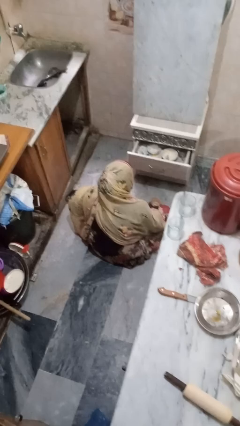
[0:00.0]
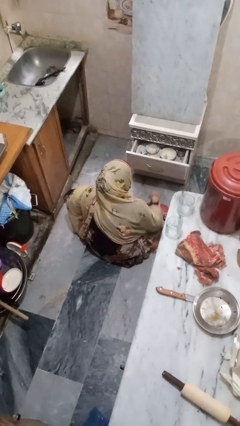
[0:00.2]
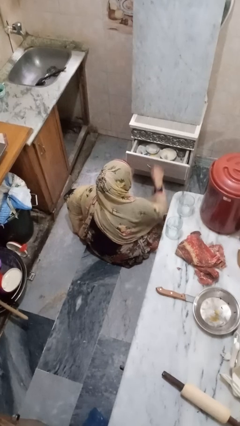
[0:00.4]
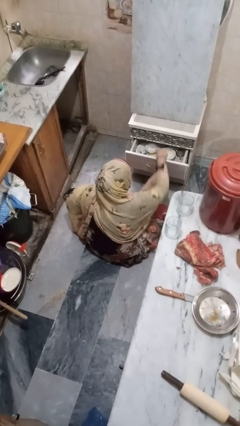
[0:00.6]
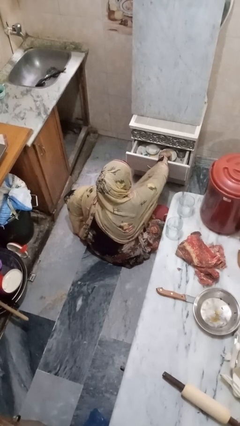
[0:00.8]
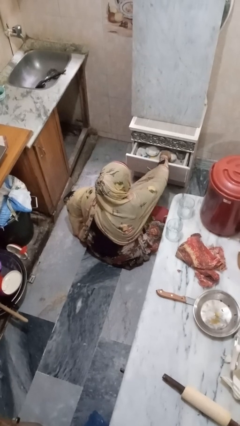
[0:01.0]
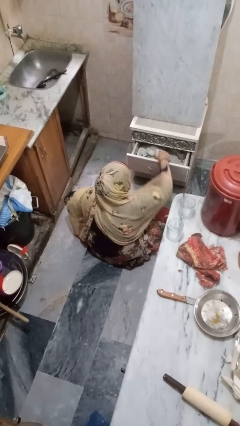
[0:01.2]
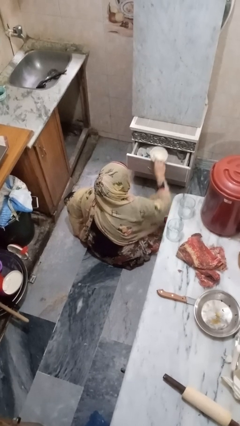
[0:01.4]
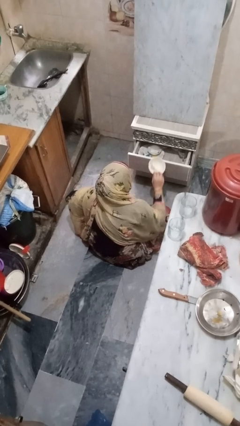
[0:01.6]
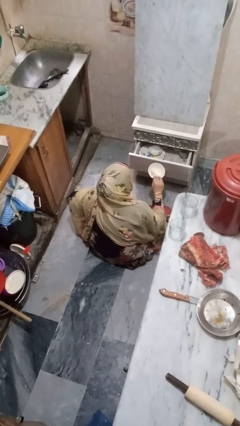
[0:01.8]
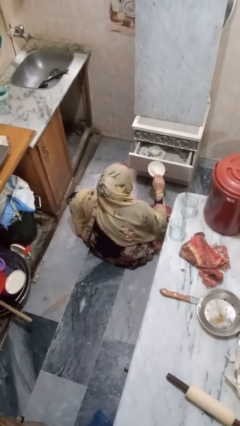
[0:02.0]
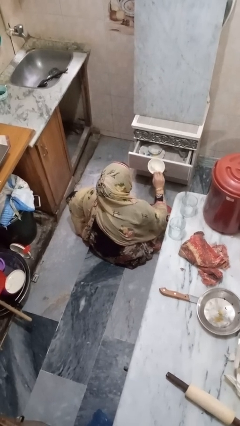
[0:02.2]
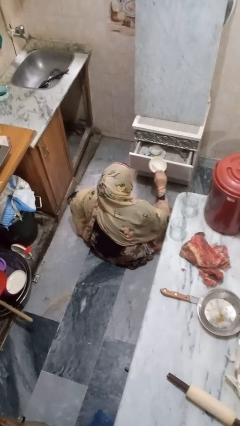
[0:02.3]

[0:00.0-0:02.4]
person takes object from kitchen drawer

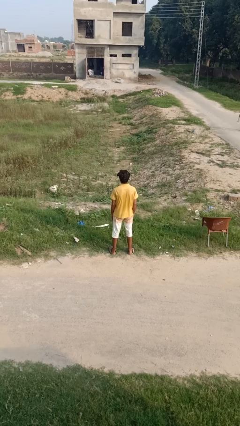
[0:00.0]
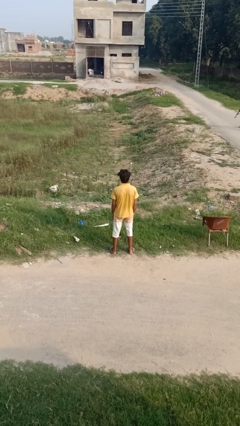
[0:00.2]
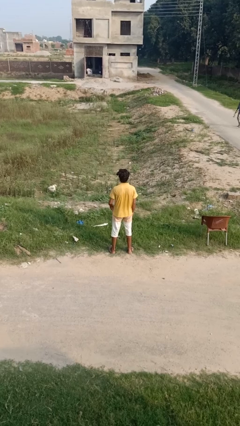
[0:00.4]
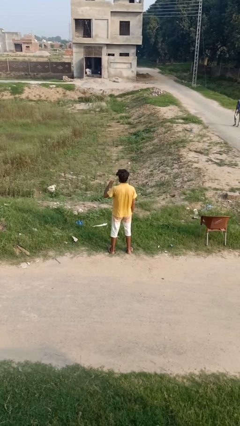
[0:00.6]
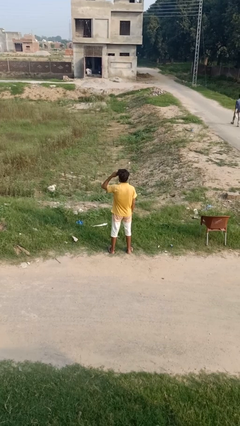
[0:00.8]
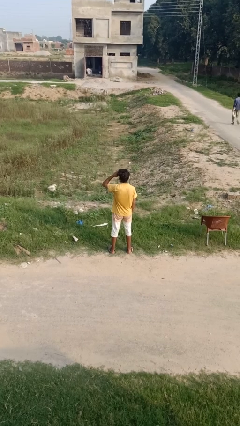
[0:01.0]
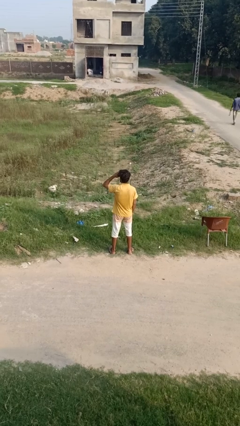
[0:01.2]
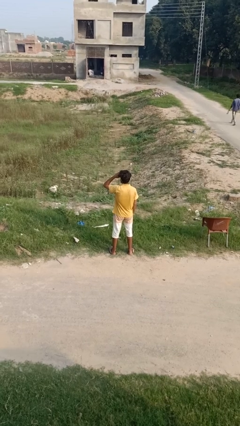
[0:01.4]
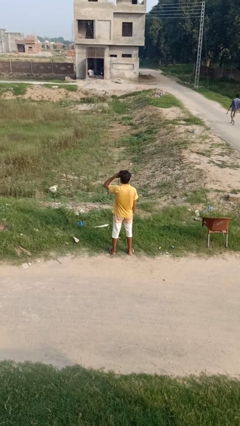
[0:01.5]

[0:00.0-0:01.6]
person shades eyes

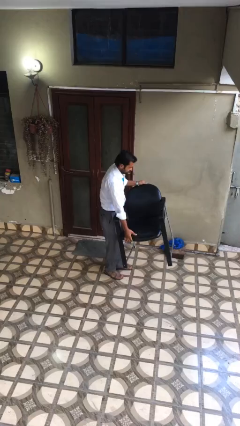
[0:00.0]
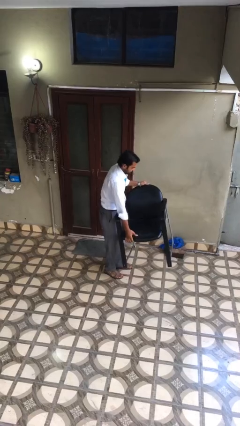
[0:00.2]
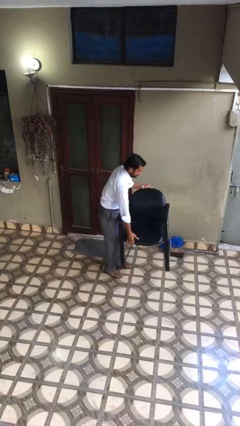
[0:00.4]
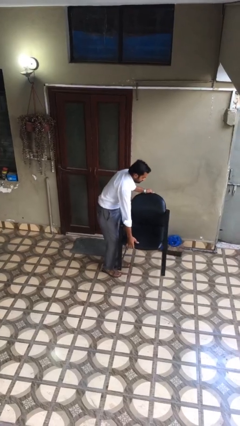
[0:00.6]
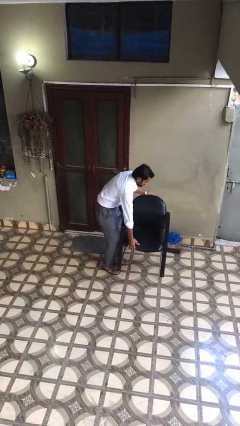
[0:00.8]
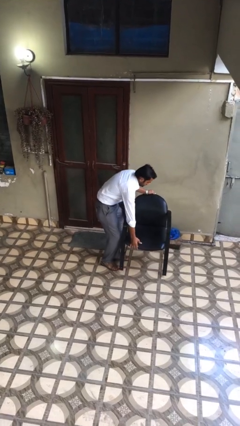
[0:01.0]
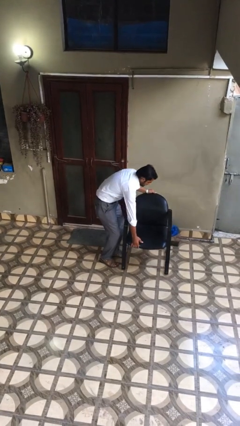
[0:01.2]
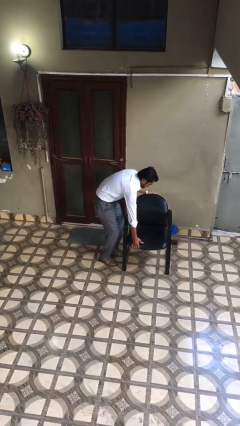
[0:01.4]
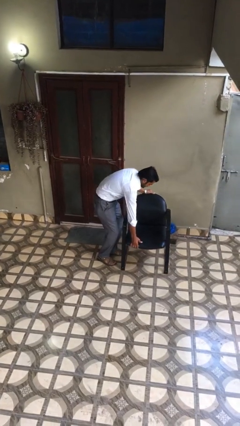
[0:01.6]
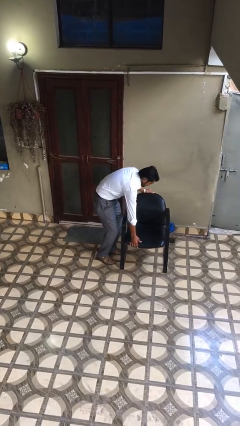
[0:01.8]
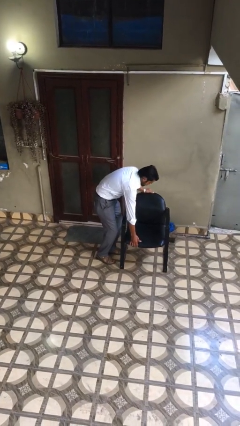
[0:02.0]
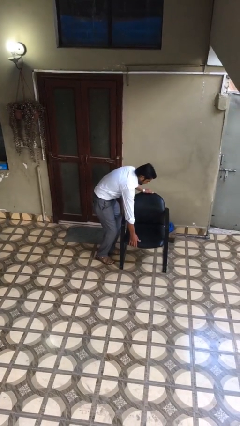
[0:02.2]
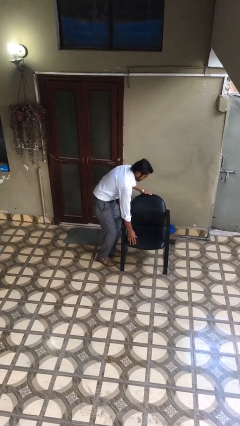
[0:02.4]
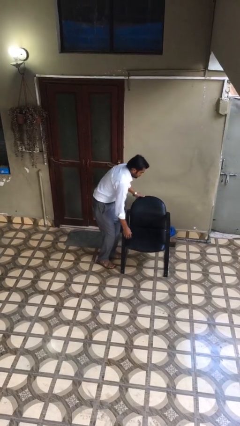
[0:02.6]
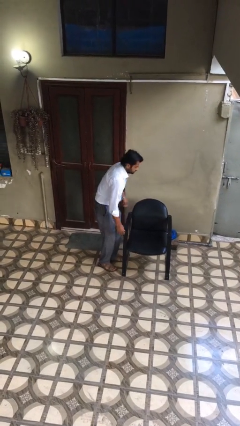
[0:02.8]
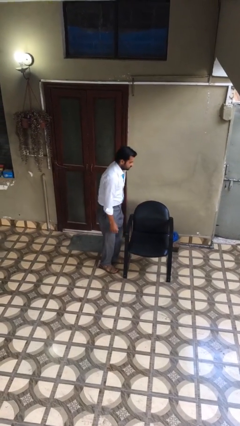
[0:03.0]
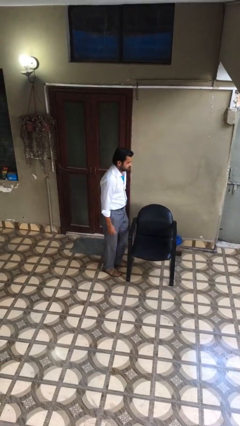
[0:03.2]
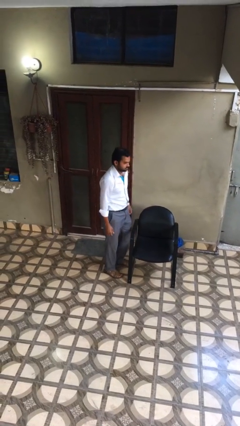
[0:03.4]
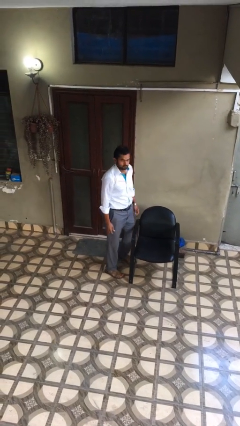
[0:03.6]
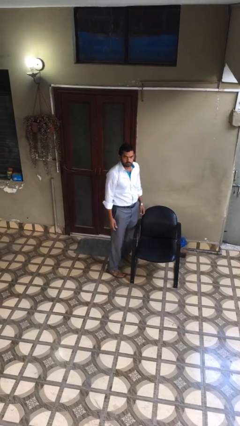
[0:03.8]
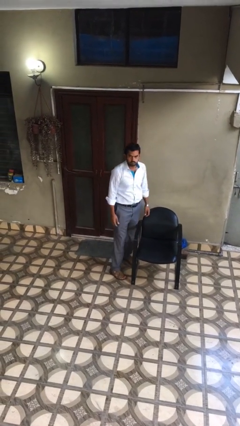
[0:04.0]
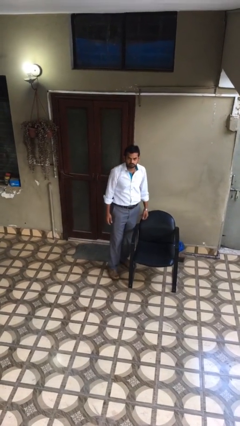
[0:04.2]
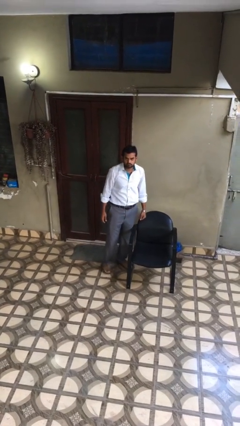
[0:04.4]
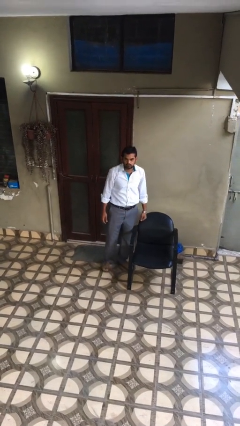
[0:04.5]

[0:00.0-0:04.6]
person puts down object on floor

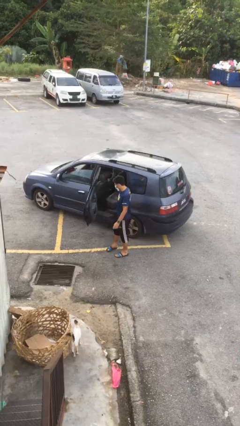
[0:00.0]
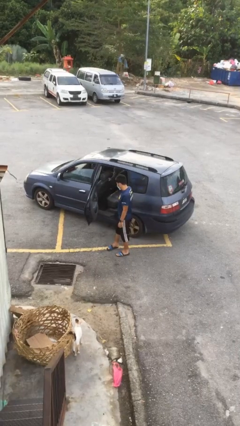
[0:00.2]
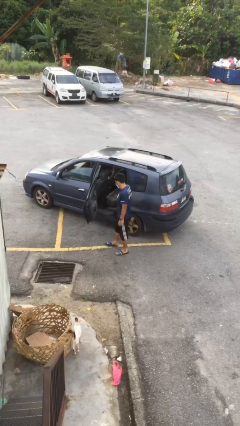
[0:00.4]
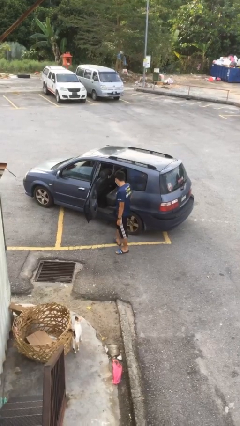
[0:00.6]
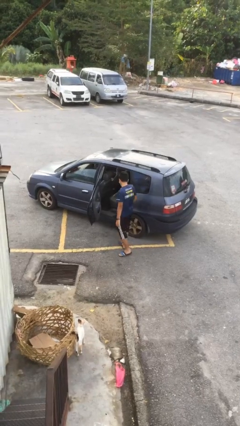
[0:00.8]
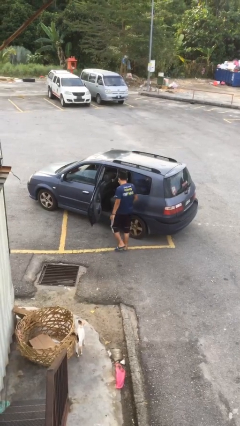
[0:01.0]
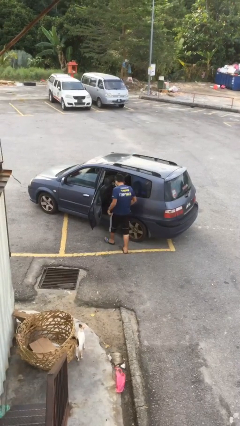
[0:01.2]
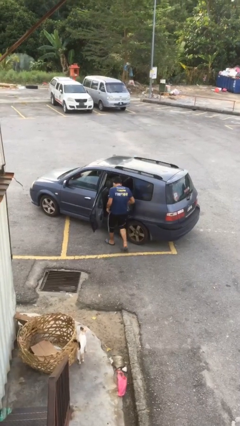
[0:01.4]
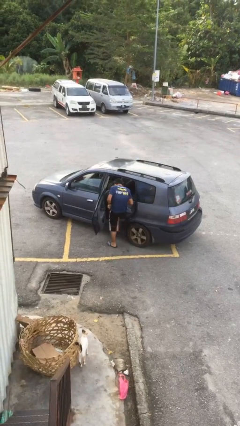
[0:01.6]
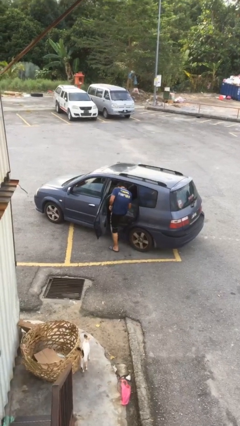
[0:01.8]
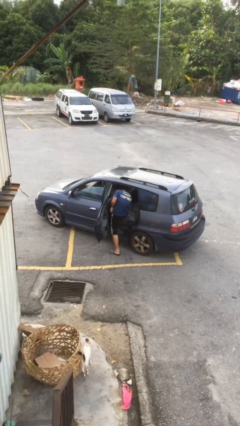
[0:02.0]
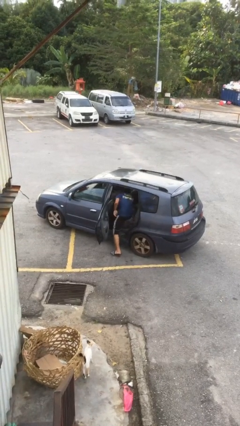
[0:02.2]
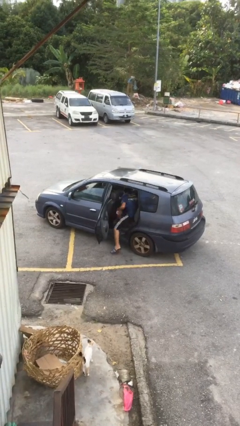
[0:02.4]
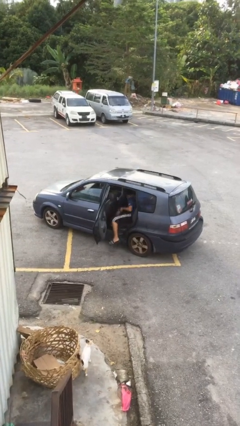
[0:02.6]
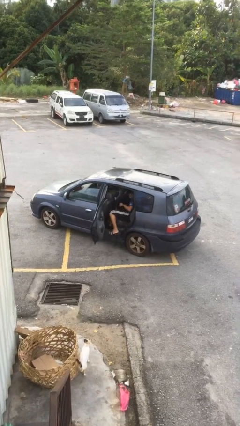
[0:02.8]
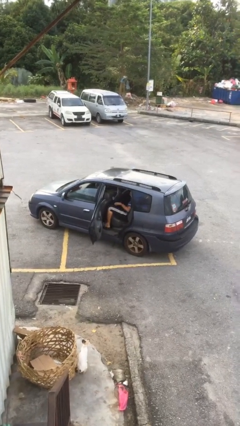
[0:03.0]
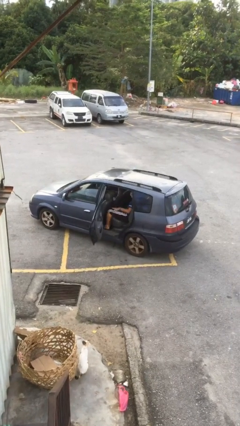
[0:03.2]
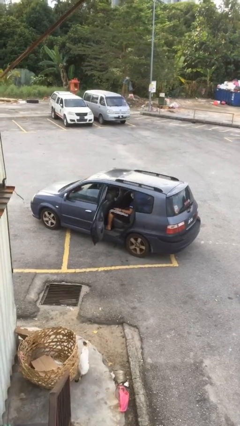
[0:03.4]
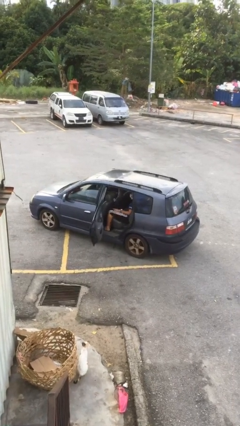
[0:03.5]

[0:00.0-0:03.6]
person enters car

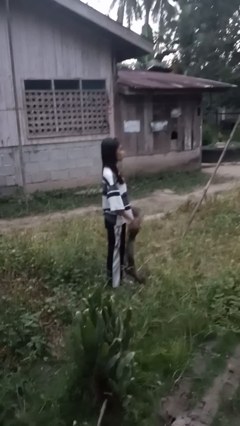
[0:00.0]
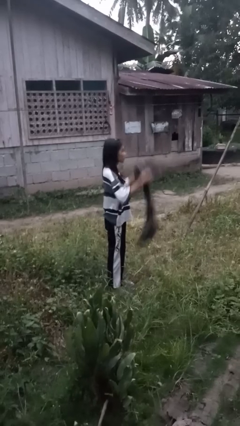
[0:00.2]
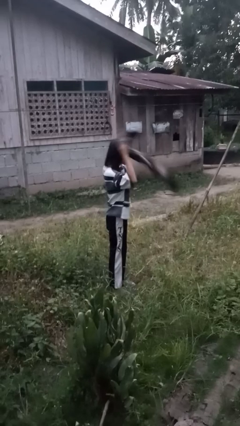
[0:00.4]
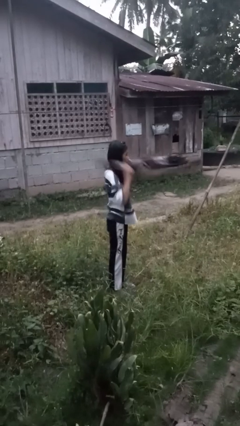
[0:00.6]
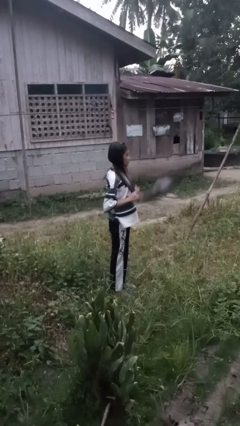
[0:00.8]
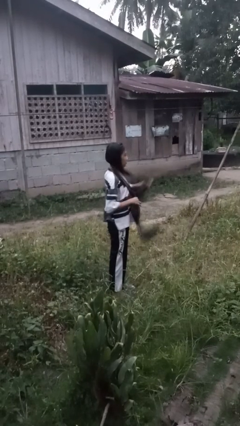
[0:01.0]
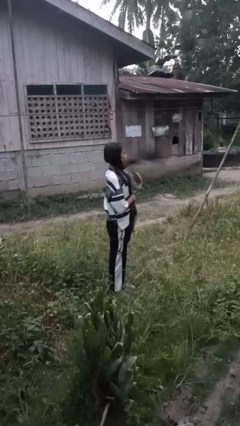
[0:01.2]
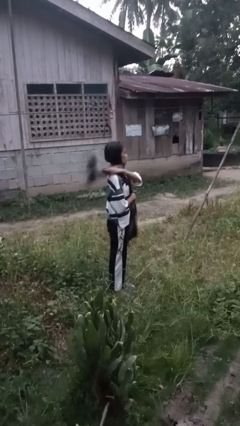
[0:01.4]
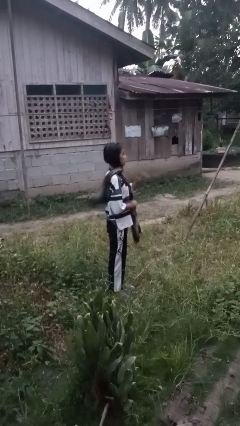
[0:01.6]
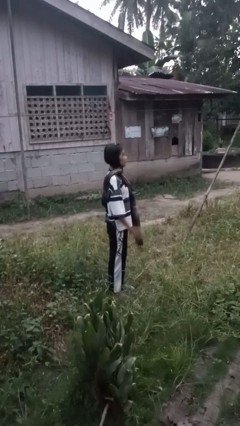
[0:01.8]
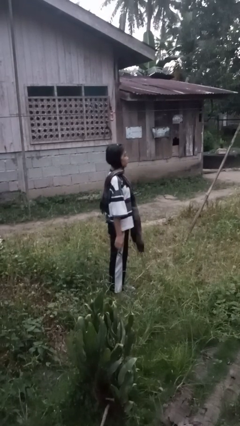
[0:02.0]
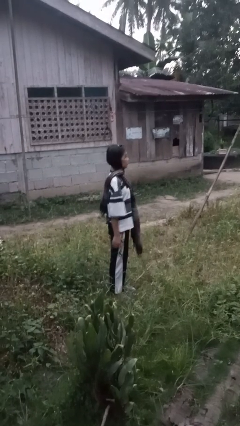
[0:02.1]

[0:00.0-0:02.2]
person puts on scarf

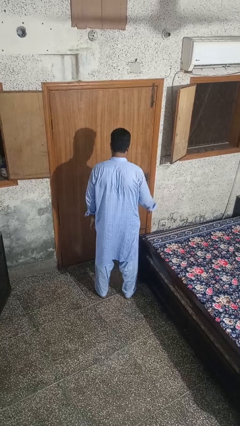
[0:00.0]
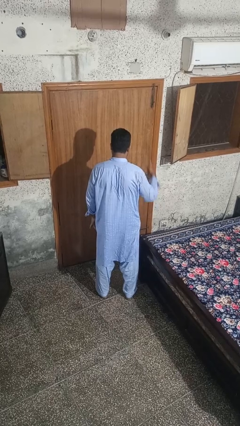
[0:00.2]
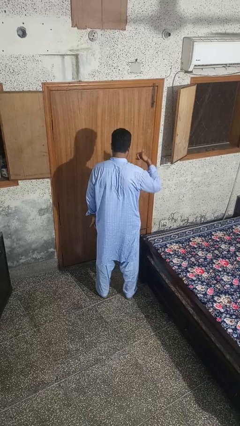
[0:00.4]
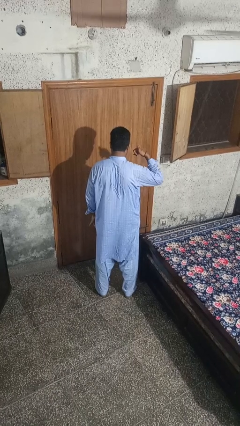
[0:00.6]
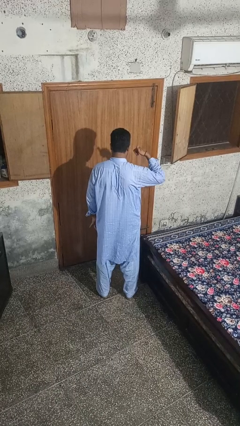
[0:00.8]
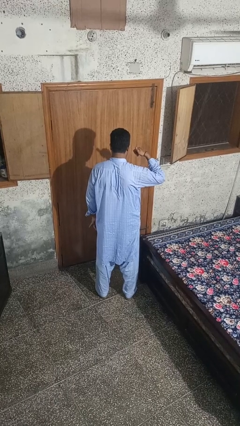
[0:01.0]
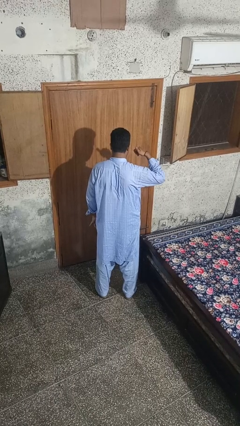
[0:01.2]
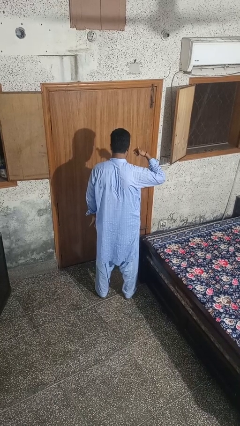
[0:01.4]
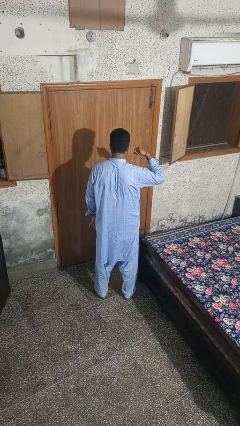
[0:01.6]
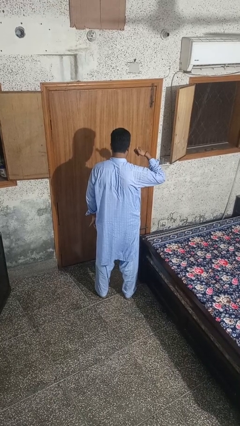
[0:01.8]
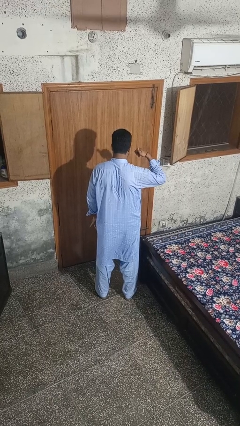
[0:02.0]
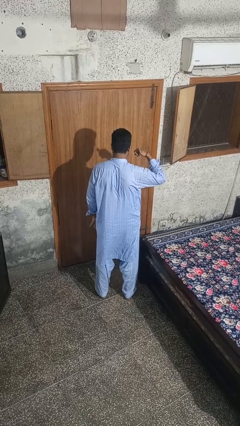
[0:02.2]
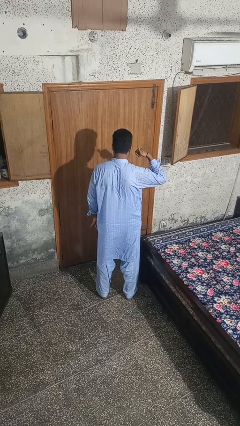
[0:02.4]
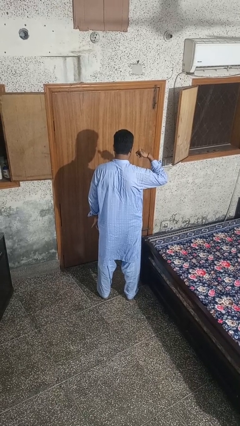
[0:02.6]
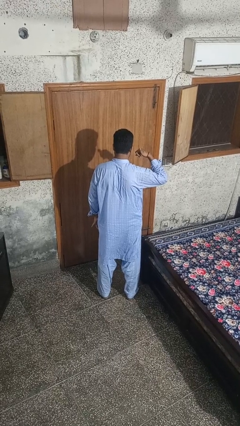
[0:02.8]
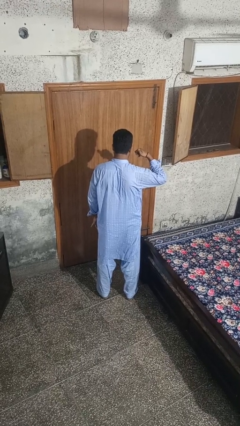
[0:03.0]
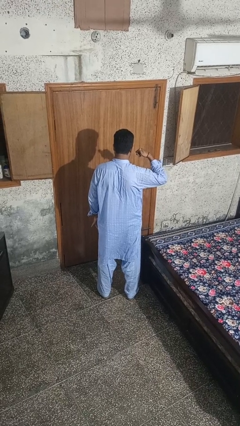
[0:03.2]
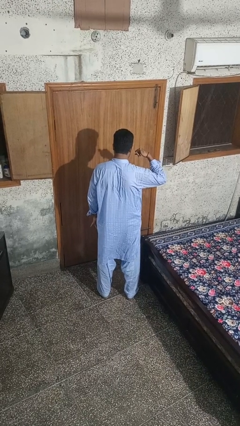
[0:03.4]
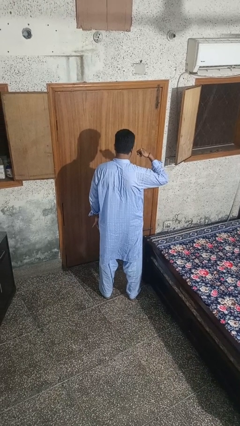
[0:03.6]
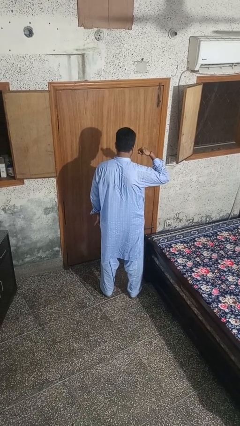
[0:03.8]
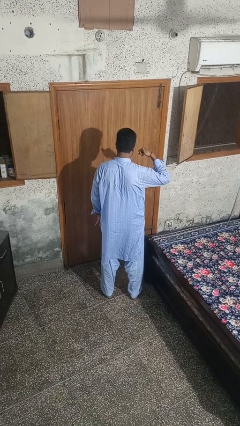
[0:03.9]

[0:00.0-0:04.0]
person gestures call me
